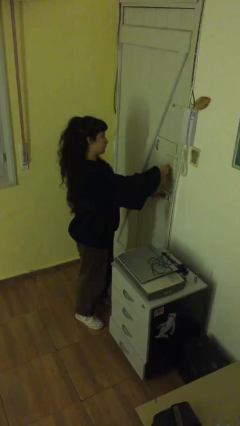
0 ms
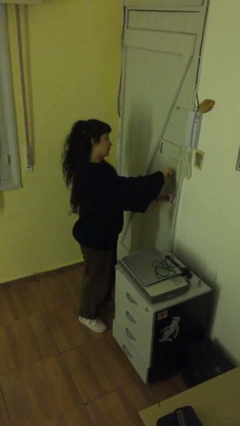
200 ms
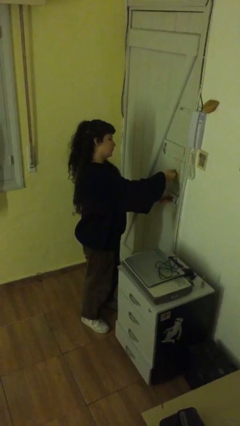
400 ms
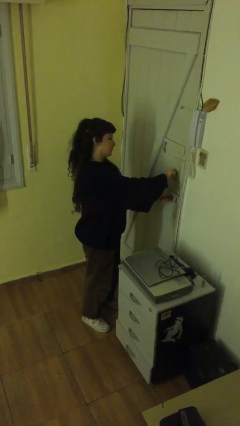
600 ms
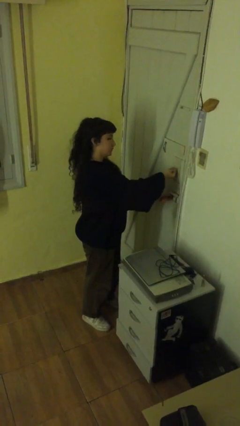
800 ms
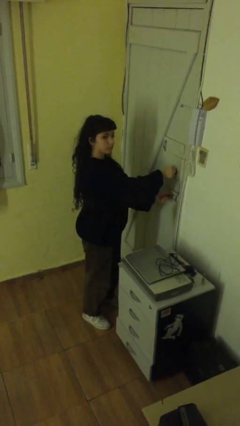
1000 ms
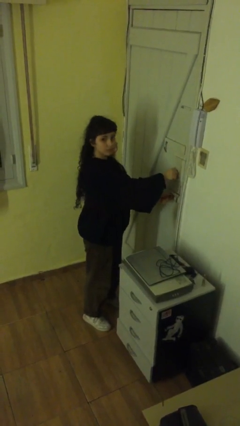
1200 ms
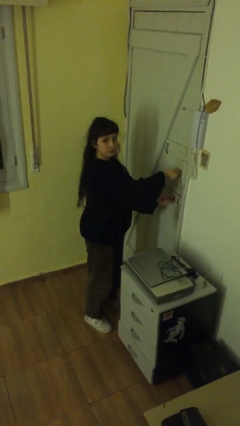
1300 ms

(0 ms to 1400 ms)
person locks door with keys

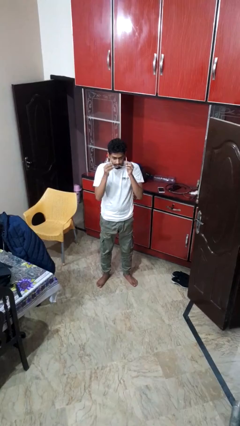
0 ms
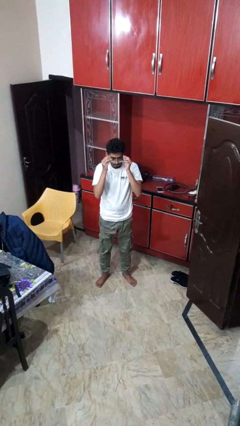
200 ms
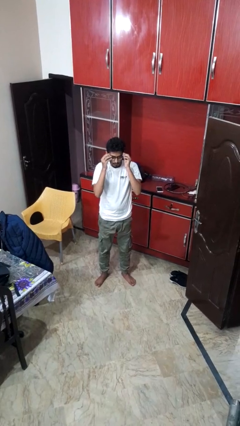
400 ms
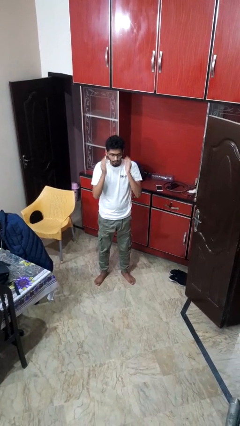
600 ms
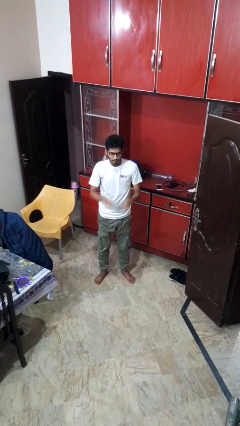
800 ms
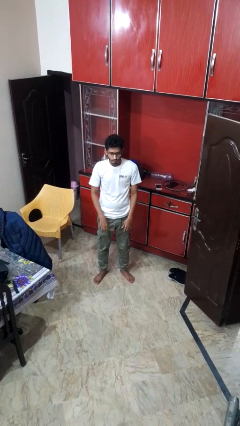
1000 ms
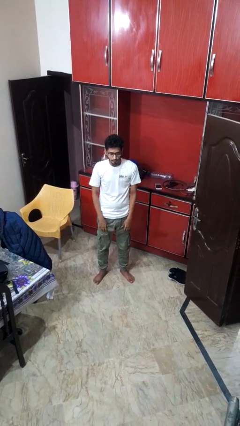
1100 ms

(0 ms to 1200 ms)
person puts on glasses

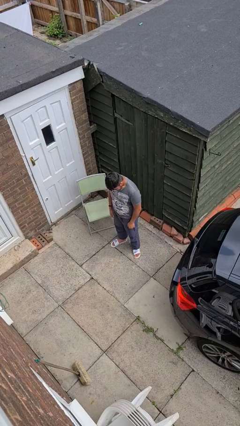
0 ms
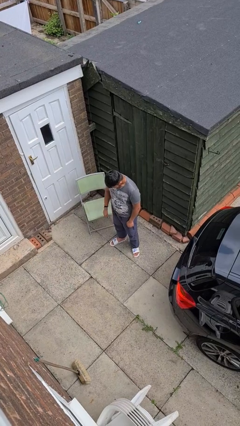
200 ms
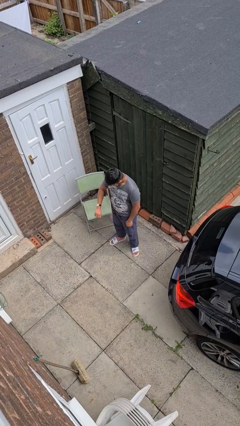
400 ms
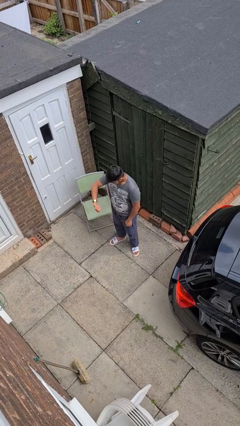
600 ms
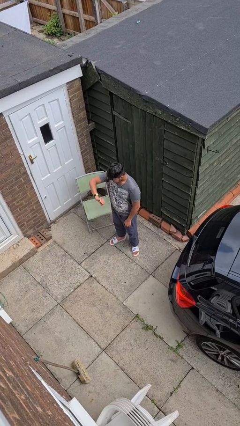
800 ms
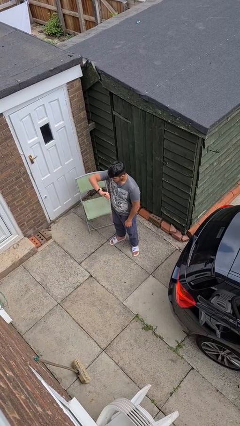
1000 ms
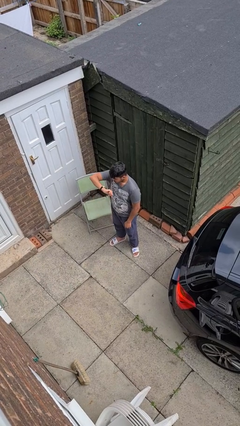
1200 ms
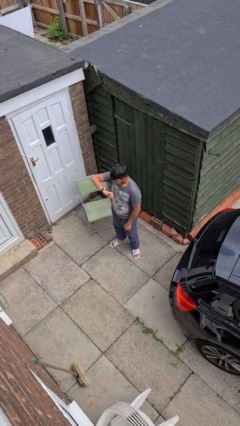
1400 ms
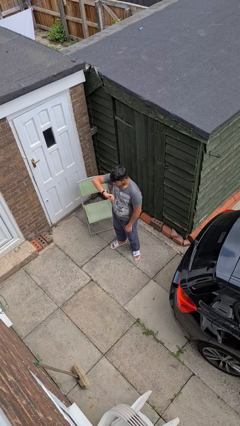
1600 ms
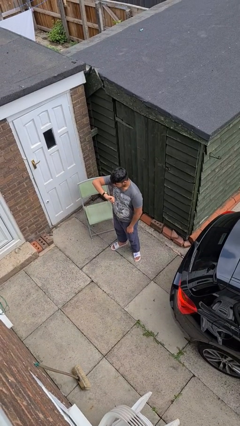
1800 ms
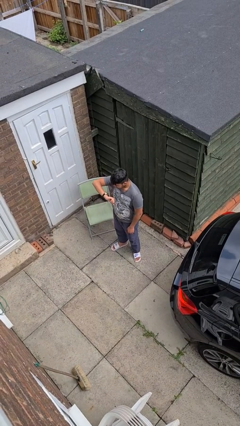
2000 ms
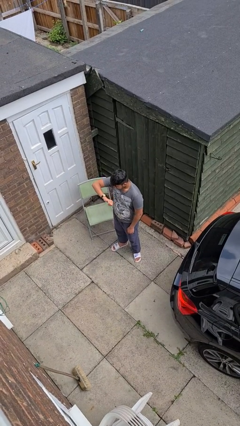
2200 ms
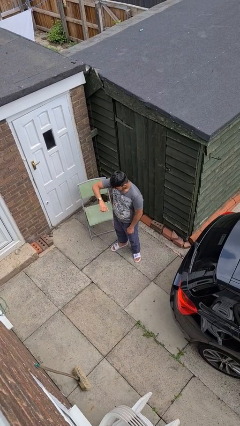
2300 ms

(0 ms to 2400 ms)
person looks at wristwatch

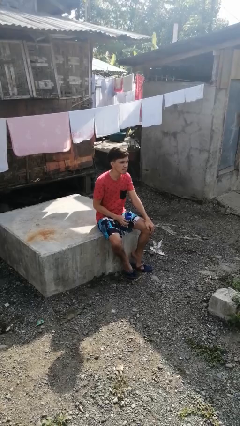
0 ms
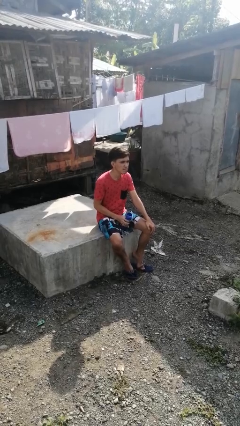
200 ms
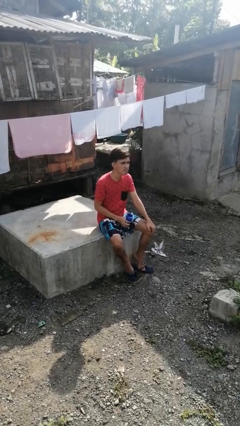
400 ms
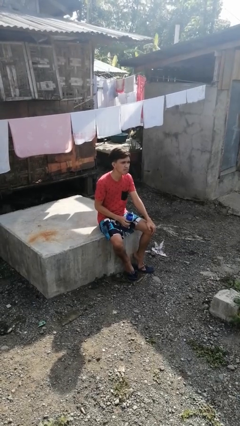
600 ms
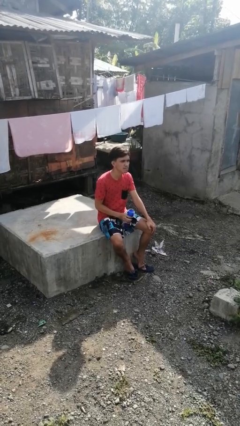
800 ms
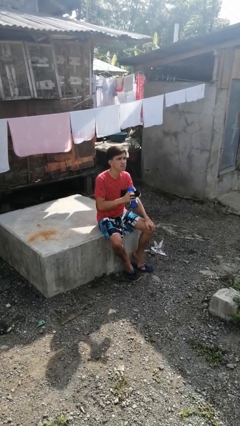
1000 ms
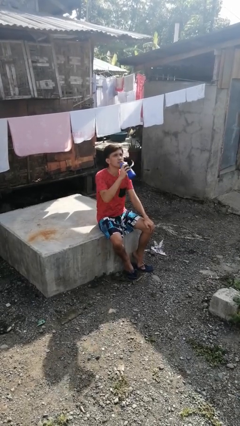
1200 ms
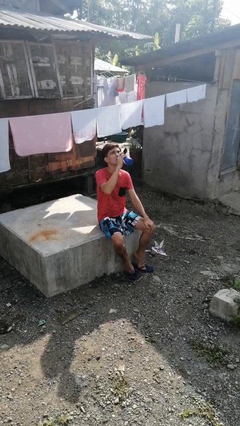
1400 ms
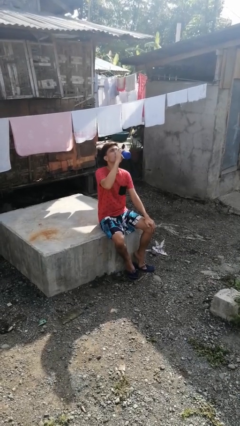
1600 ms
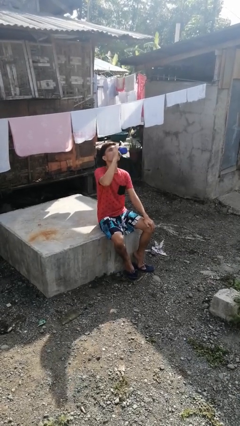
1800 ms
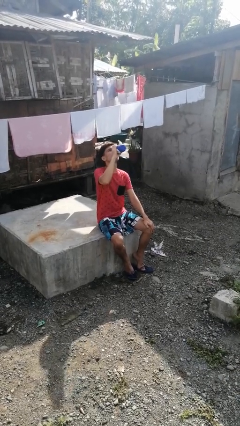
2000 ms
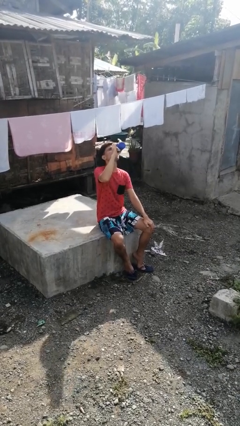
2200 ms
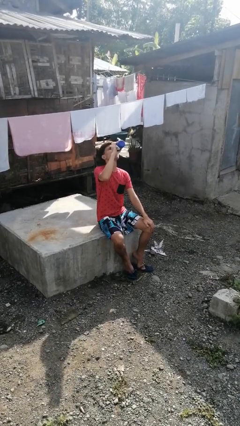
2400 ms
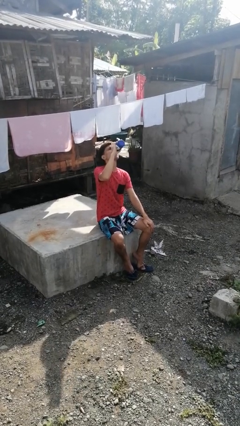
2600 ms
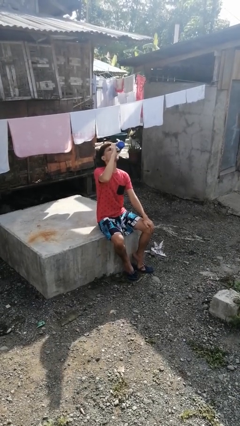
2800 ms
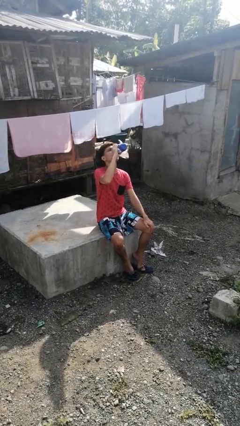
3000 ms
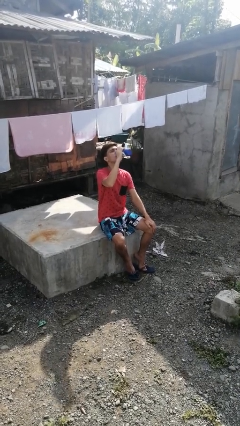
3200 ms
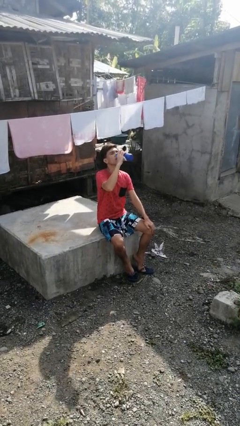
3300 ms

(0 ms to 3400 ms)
person drinks from bottle

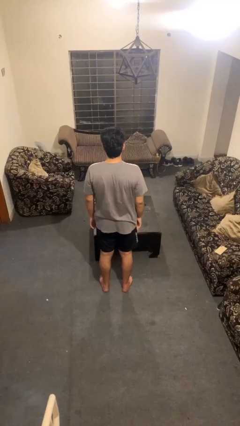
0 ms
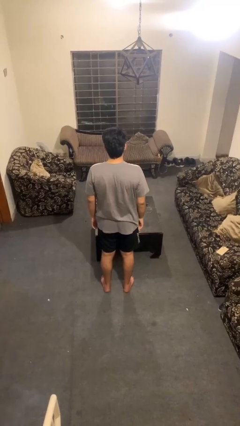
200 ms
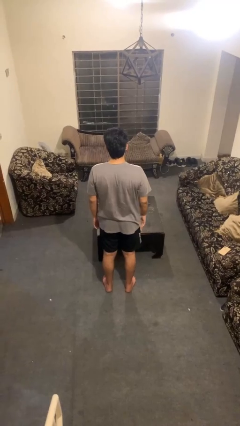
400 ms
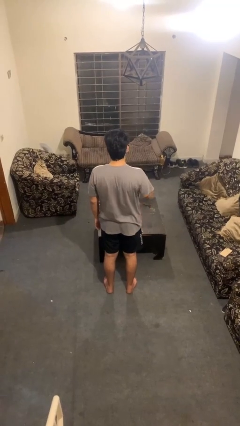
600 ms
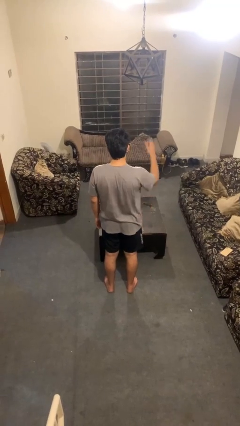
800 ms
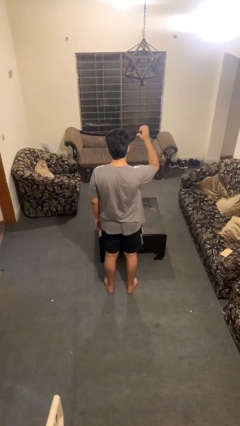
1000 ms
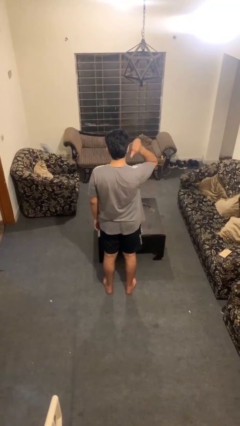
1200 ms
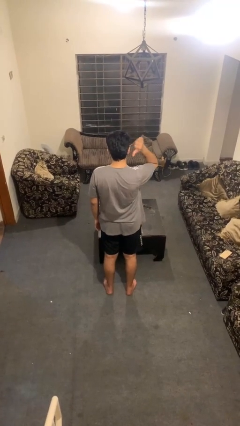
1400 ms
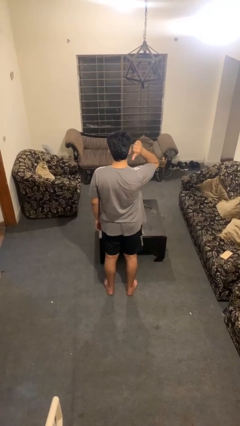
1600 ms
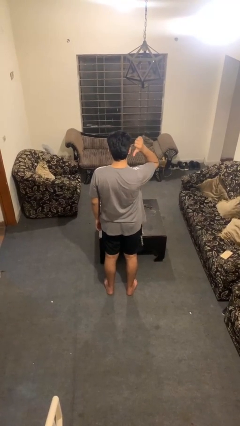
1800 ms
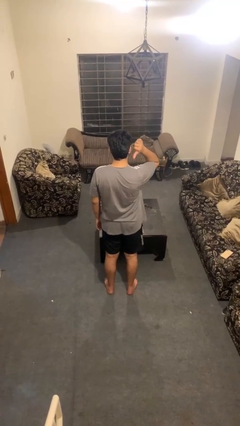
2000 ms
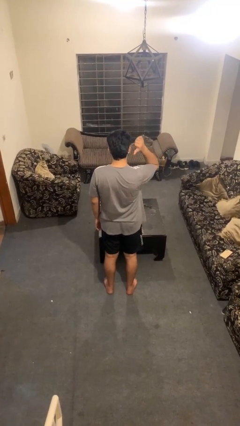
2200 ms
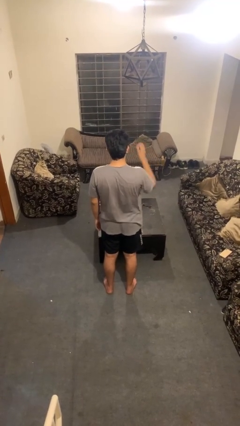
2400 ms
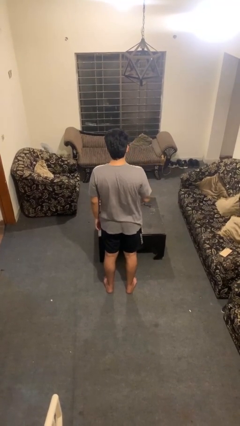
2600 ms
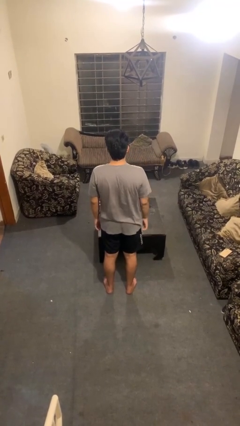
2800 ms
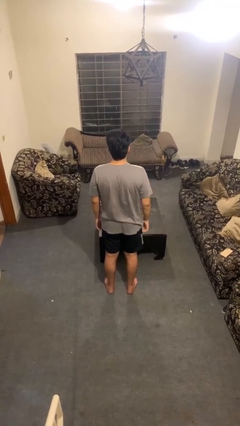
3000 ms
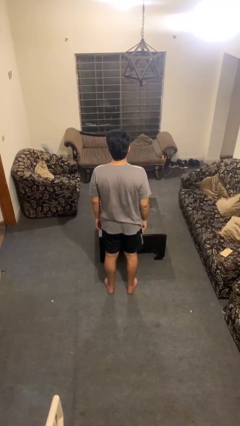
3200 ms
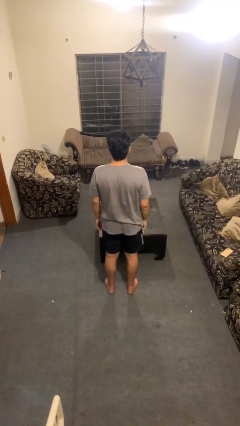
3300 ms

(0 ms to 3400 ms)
person gestures behind me

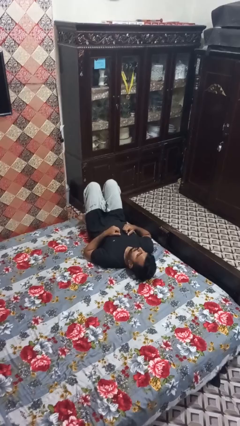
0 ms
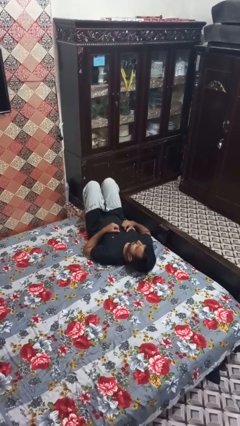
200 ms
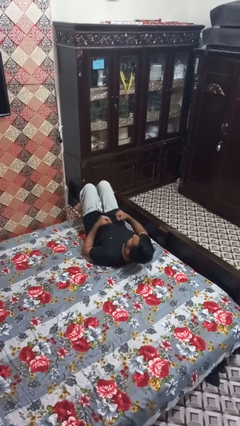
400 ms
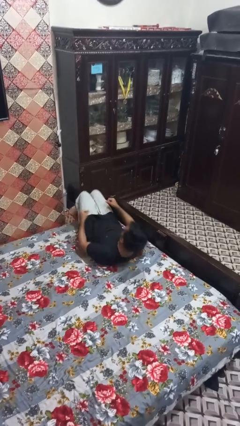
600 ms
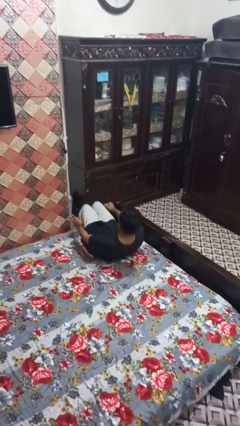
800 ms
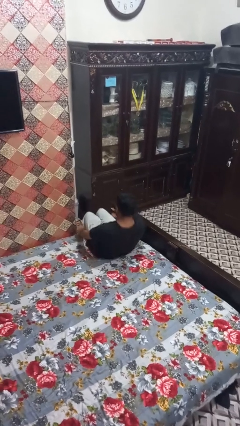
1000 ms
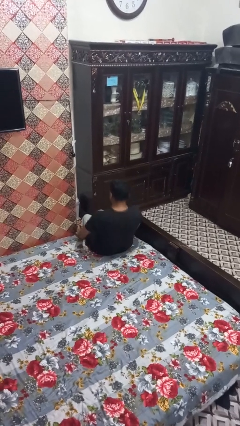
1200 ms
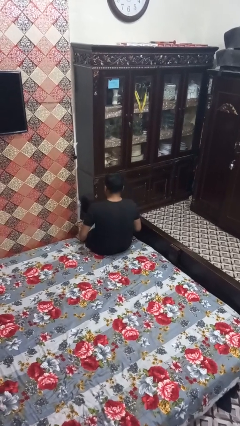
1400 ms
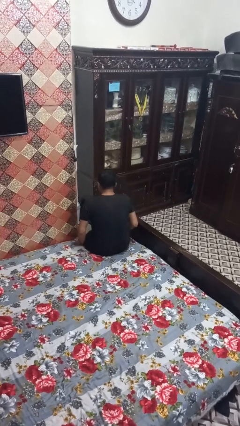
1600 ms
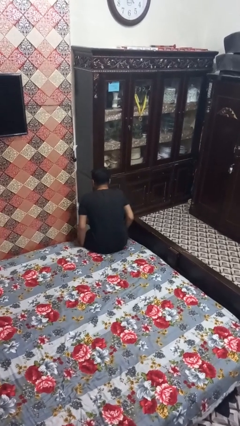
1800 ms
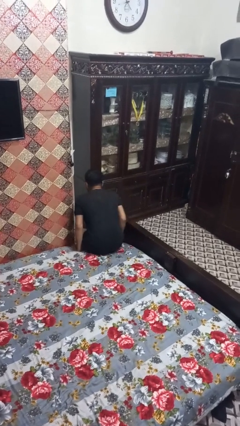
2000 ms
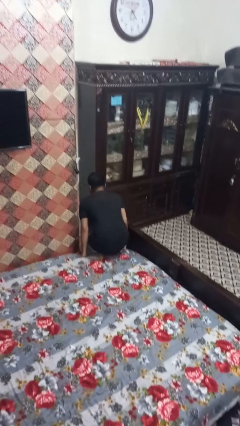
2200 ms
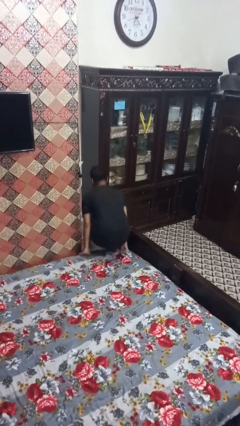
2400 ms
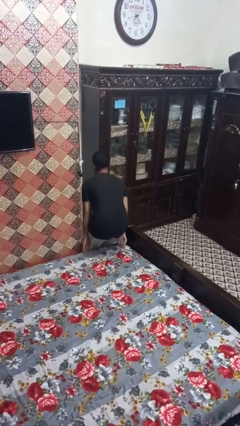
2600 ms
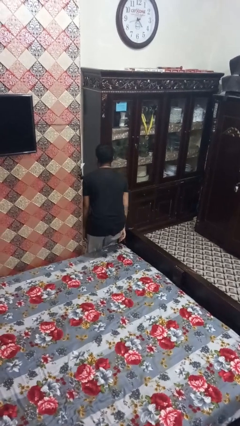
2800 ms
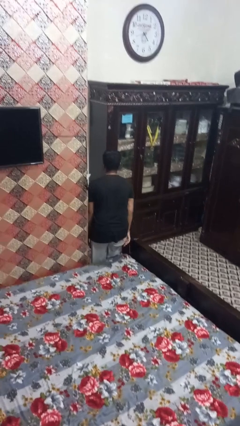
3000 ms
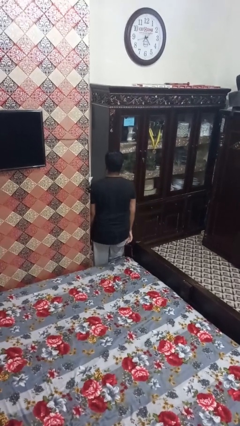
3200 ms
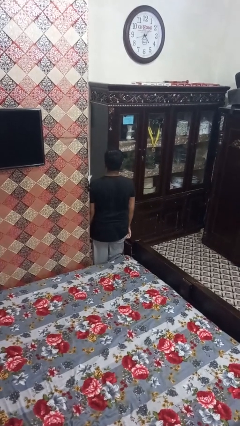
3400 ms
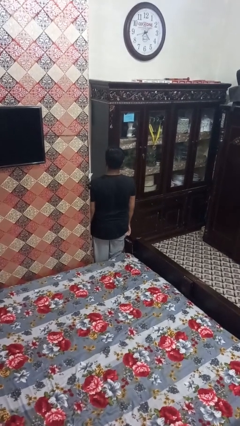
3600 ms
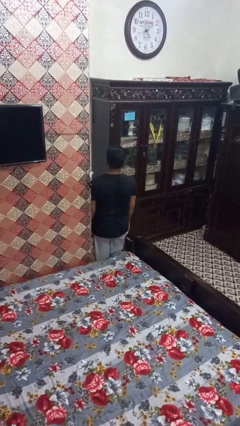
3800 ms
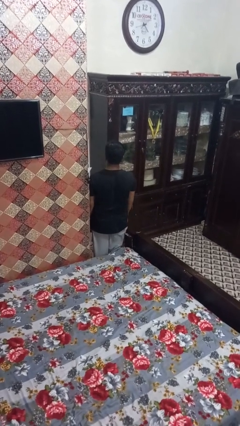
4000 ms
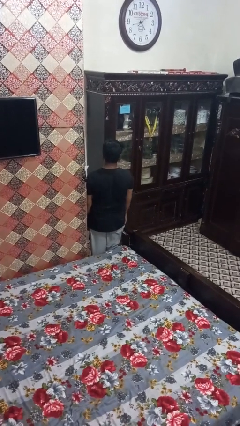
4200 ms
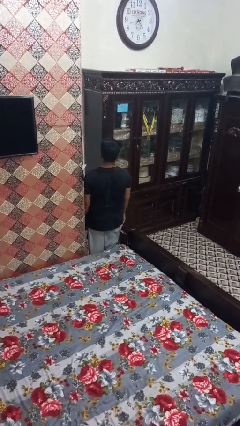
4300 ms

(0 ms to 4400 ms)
person stands up

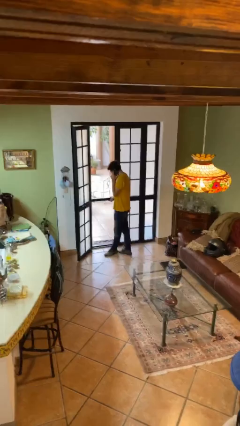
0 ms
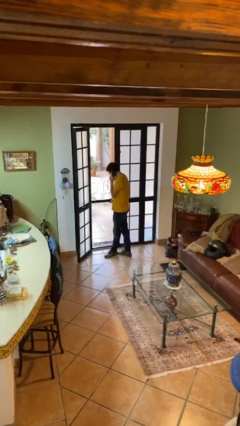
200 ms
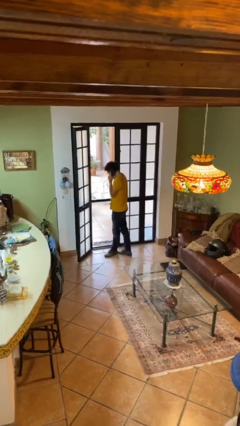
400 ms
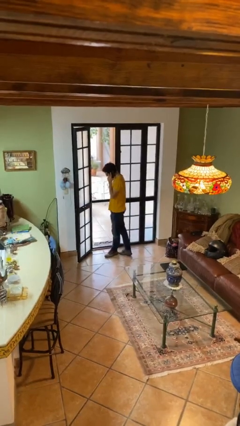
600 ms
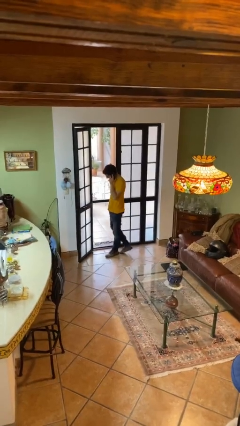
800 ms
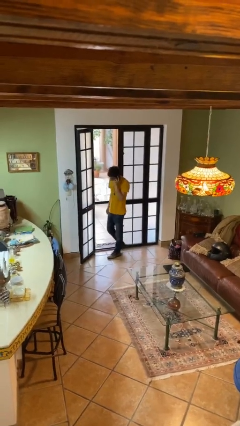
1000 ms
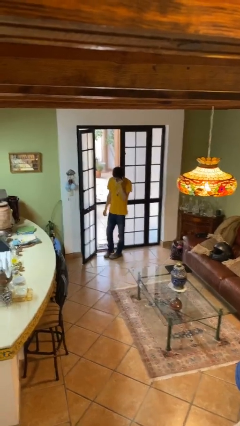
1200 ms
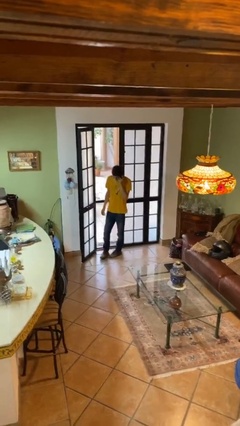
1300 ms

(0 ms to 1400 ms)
person closes facility door
